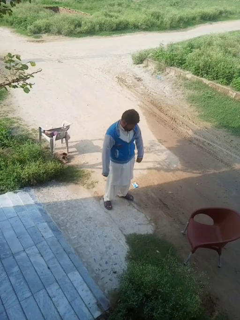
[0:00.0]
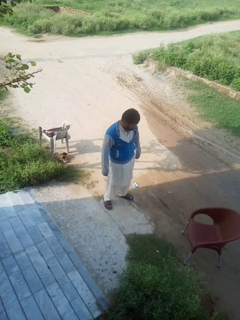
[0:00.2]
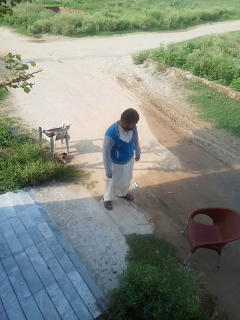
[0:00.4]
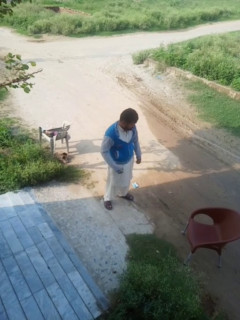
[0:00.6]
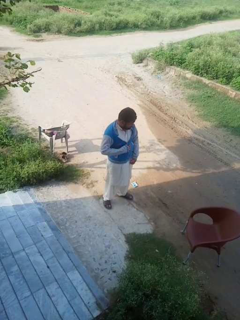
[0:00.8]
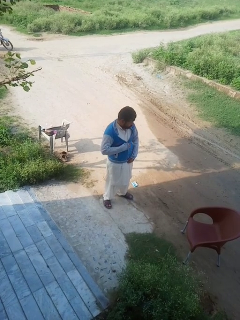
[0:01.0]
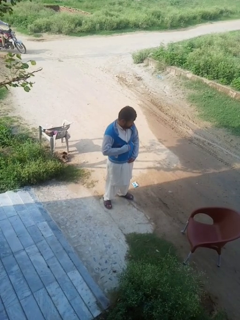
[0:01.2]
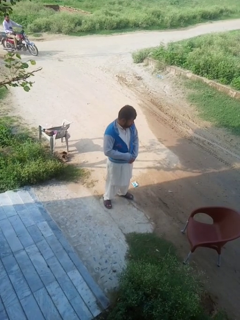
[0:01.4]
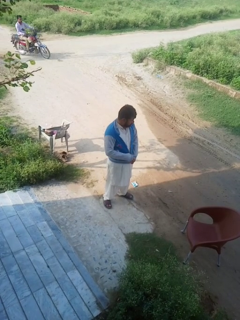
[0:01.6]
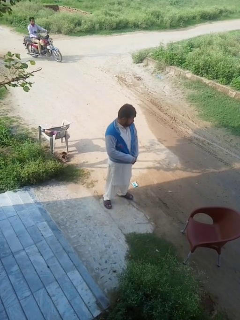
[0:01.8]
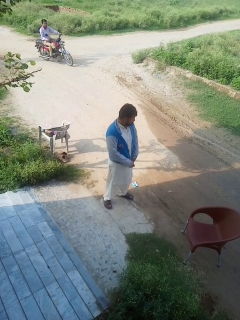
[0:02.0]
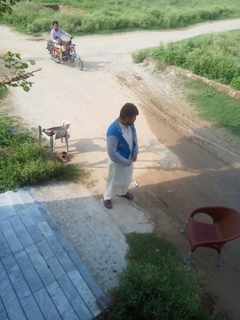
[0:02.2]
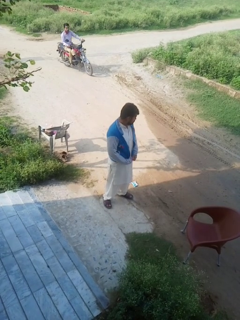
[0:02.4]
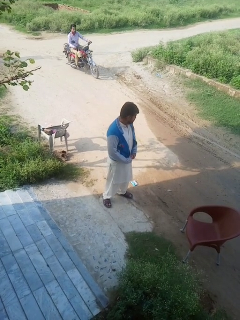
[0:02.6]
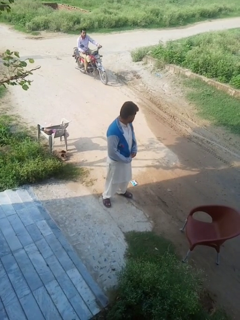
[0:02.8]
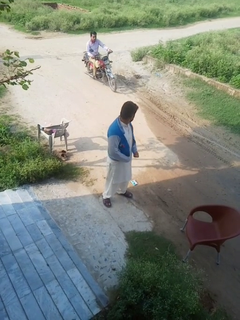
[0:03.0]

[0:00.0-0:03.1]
person unzips jacket

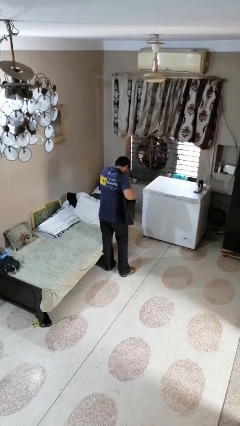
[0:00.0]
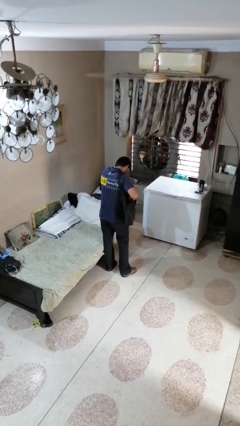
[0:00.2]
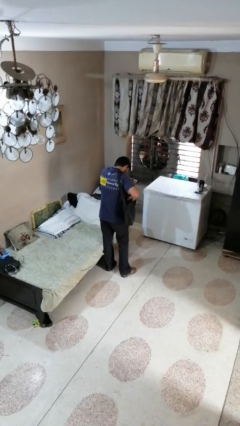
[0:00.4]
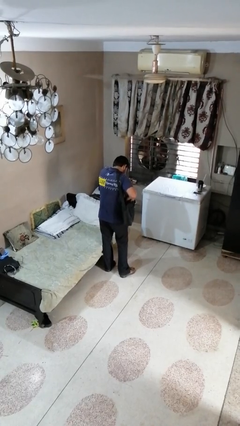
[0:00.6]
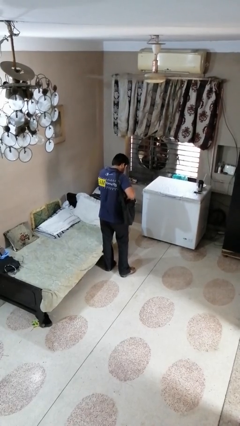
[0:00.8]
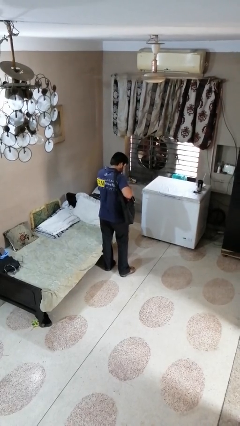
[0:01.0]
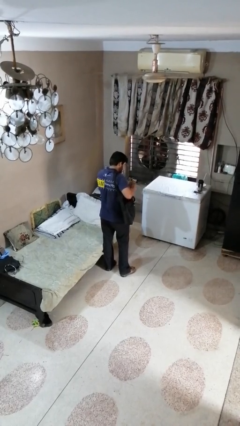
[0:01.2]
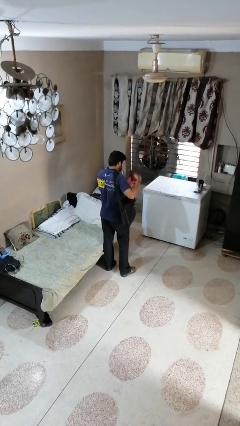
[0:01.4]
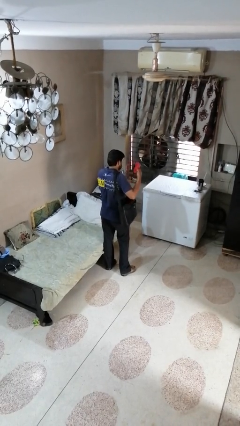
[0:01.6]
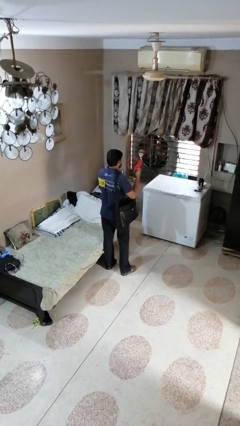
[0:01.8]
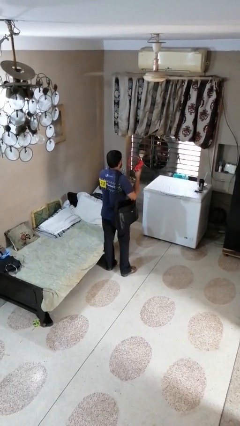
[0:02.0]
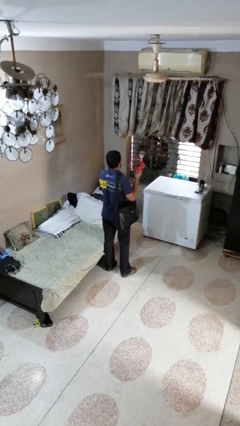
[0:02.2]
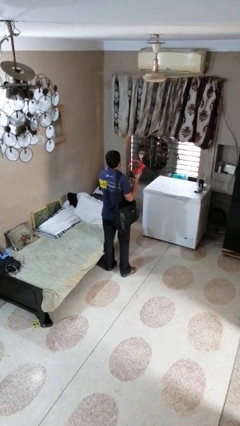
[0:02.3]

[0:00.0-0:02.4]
person takes object from backpack

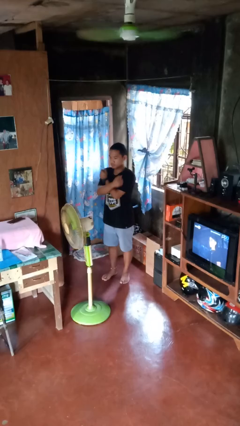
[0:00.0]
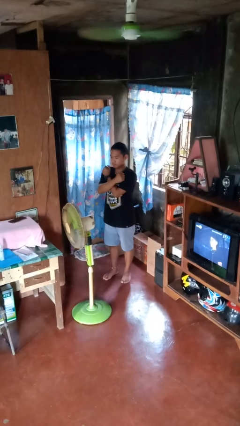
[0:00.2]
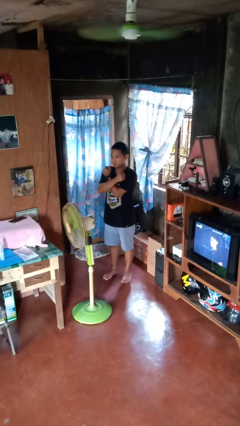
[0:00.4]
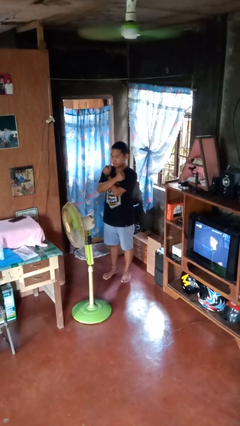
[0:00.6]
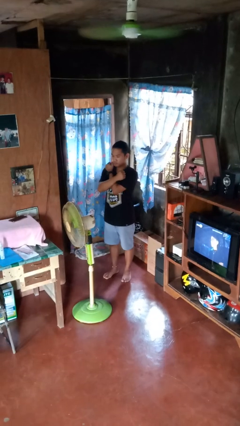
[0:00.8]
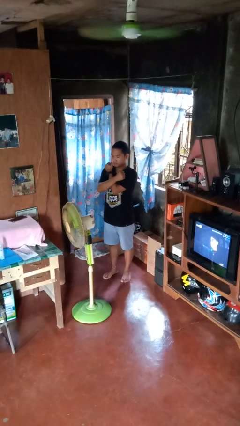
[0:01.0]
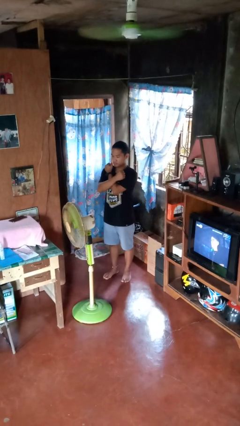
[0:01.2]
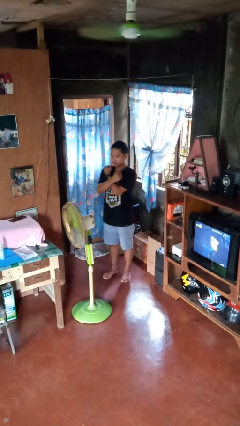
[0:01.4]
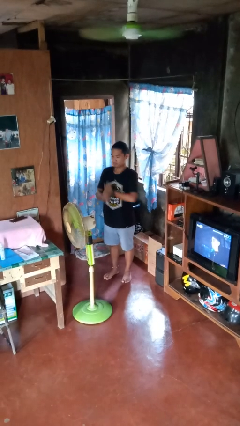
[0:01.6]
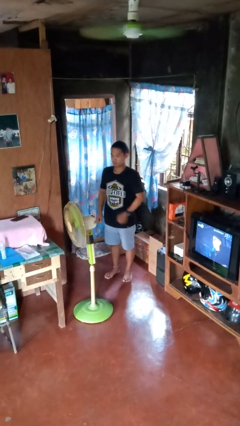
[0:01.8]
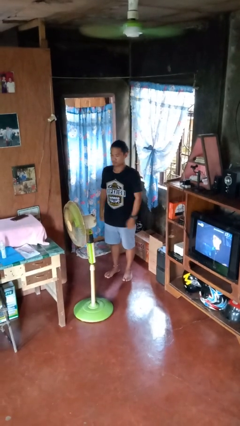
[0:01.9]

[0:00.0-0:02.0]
person gestures arms x

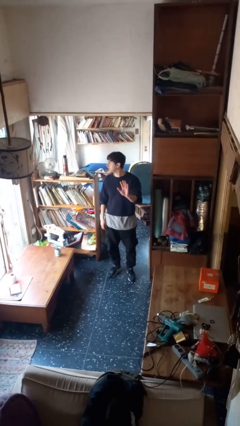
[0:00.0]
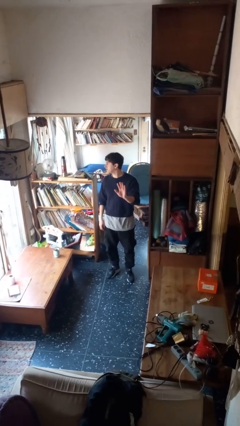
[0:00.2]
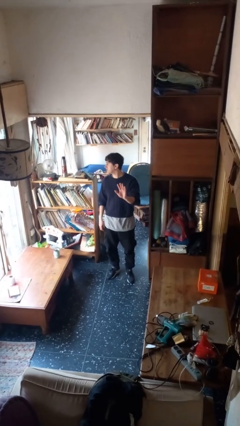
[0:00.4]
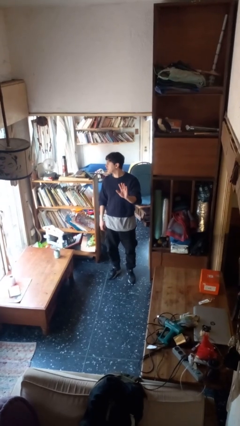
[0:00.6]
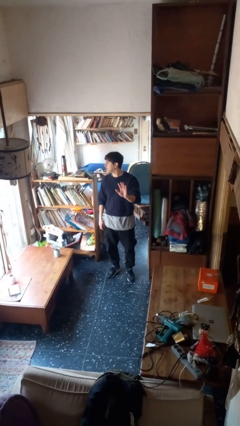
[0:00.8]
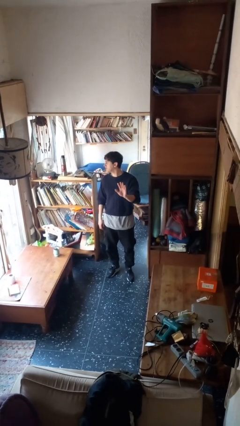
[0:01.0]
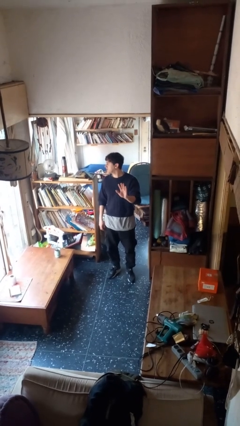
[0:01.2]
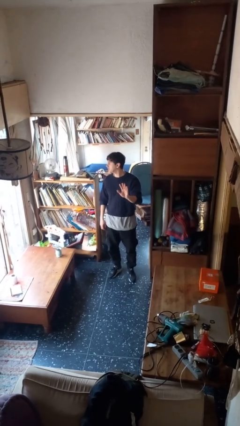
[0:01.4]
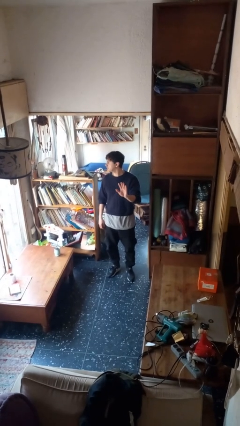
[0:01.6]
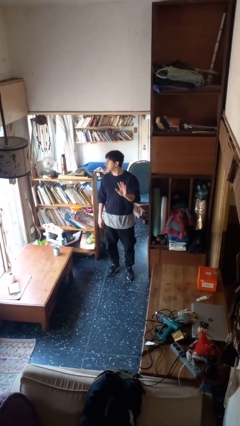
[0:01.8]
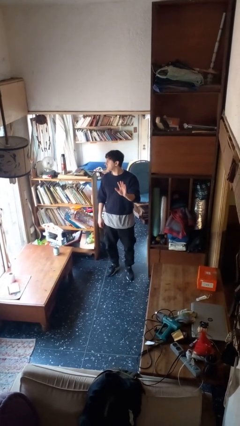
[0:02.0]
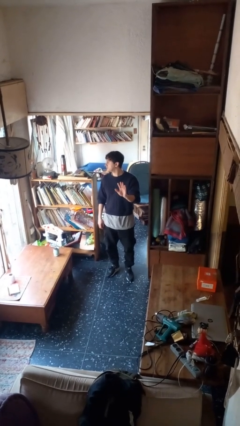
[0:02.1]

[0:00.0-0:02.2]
person gestures number five

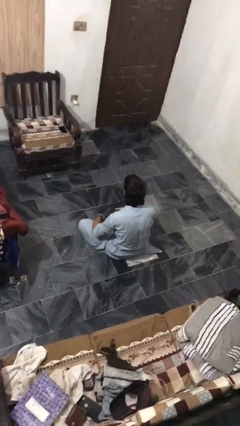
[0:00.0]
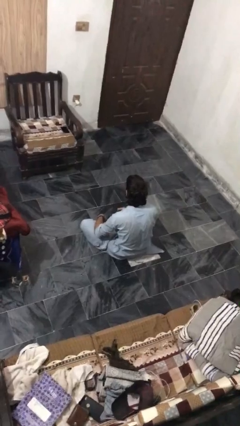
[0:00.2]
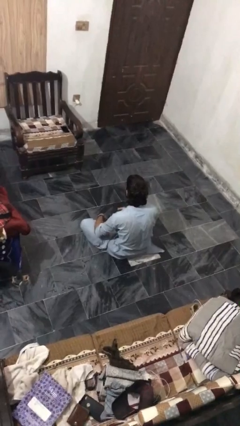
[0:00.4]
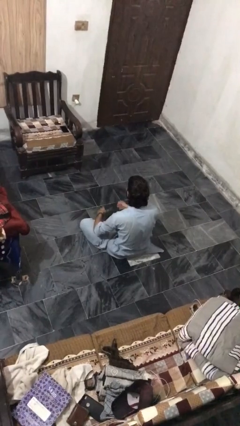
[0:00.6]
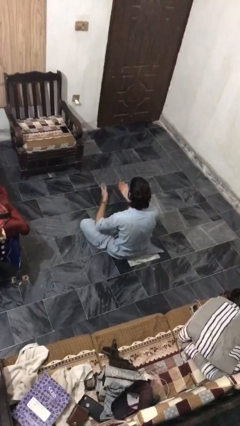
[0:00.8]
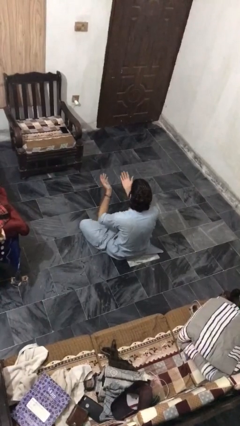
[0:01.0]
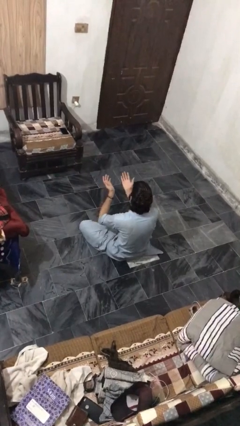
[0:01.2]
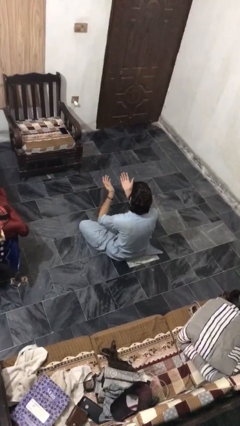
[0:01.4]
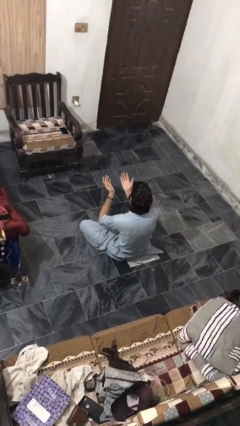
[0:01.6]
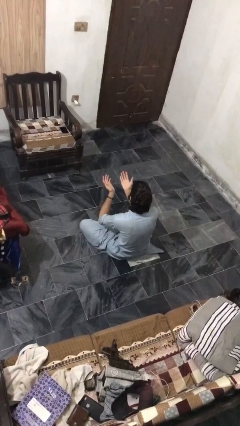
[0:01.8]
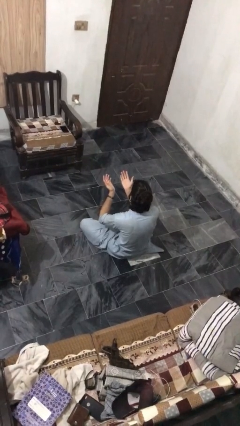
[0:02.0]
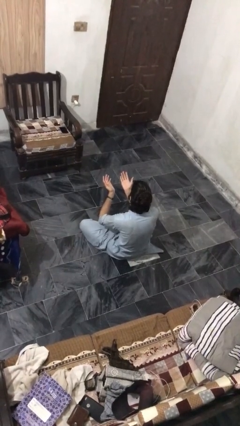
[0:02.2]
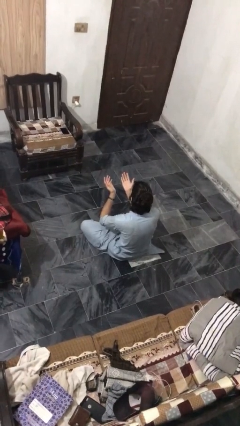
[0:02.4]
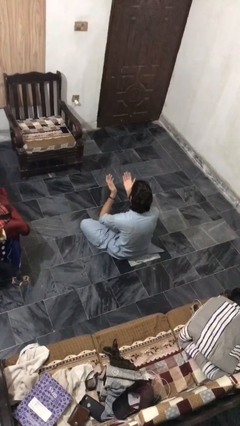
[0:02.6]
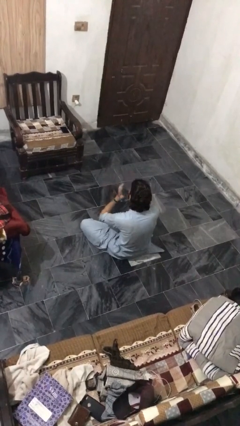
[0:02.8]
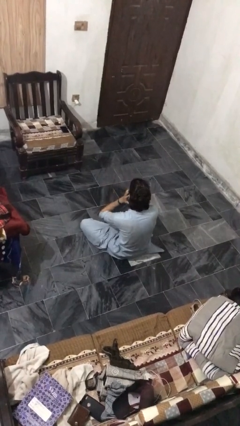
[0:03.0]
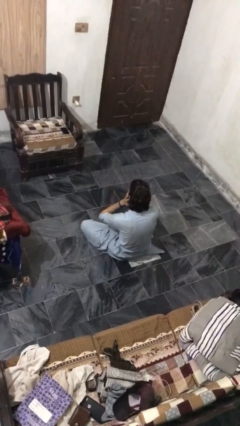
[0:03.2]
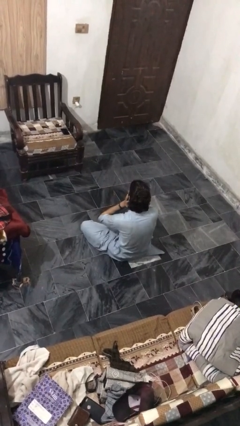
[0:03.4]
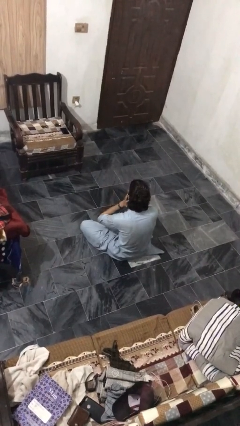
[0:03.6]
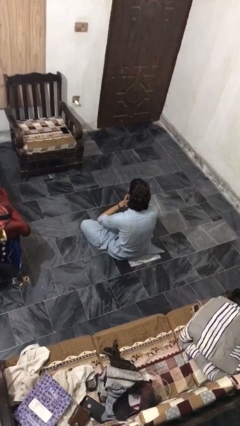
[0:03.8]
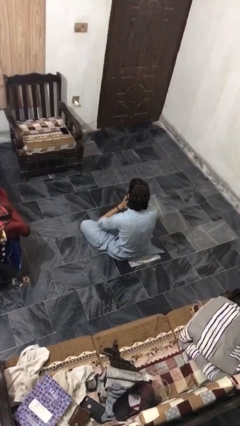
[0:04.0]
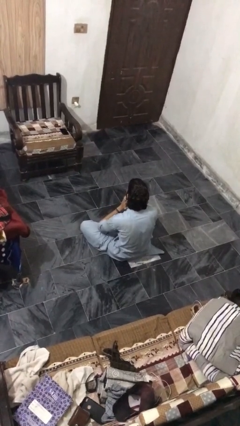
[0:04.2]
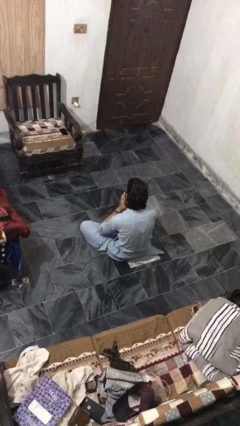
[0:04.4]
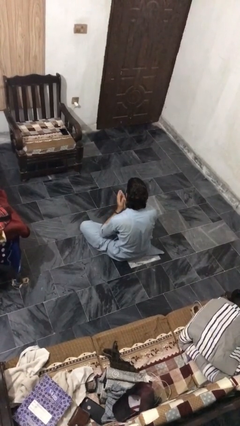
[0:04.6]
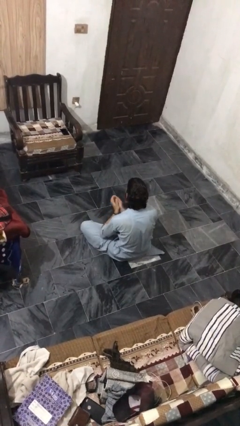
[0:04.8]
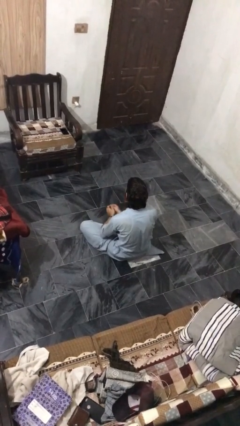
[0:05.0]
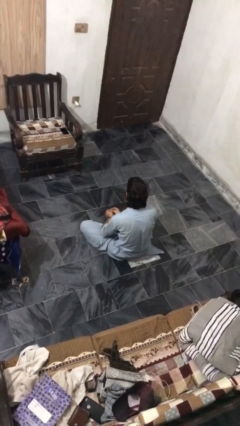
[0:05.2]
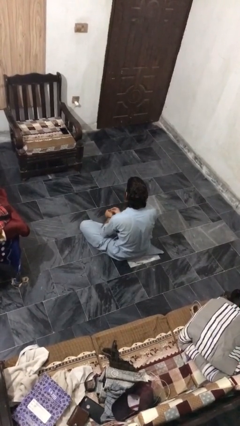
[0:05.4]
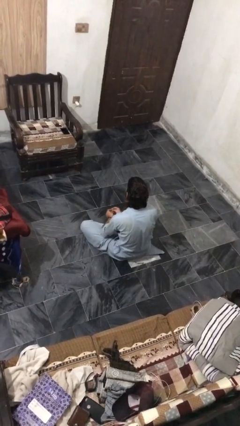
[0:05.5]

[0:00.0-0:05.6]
person prays

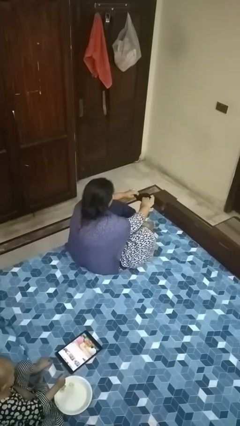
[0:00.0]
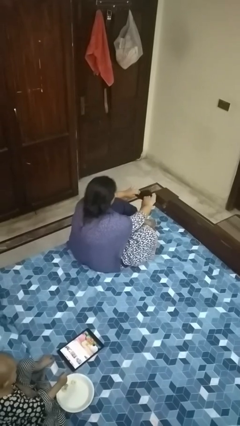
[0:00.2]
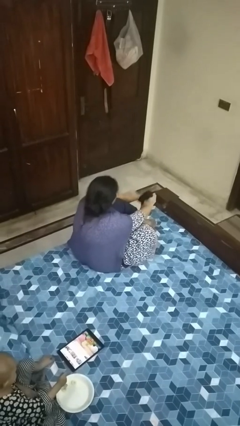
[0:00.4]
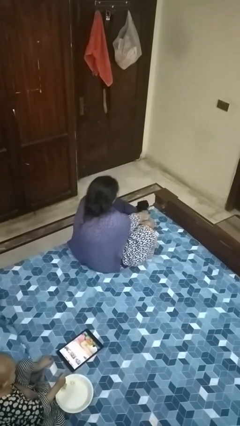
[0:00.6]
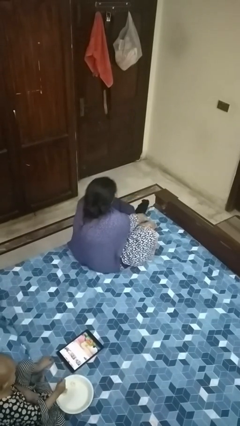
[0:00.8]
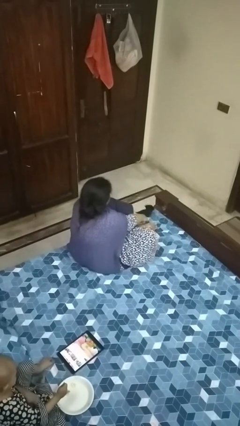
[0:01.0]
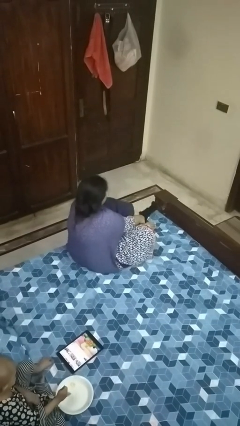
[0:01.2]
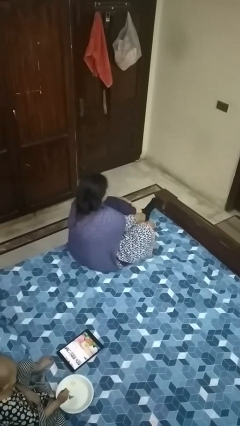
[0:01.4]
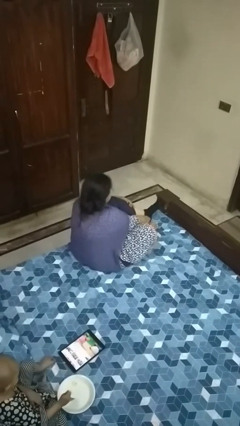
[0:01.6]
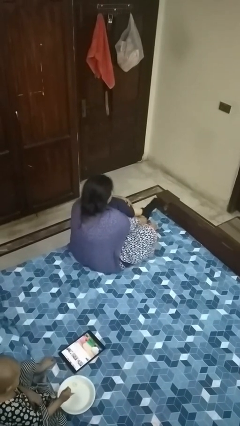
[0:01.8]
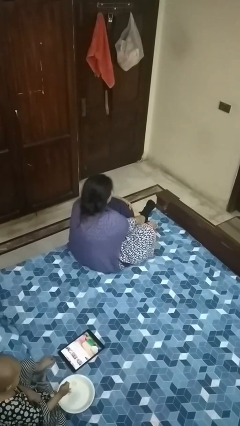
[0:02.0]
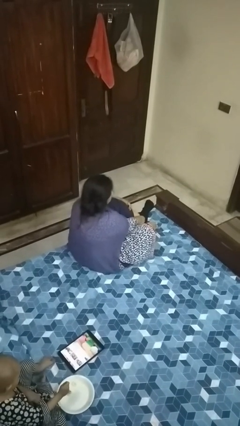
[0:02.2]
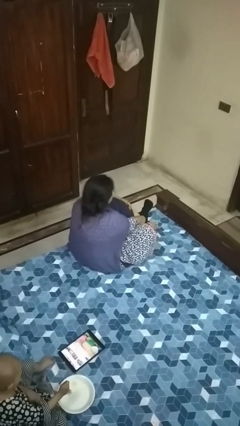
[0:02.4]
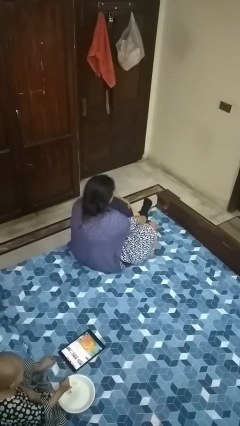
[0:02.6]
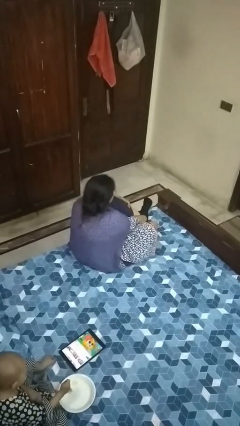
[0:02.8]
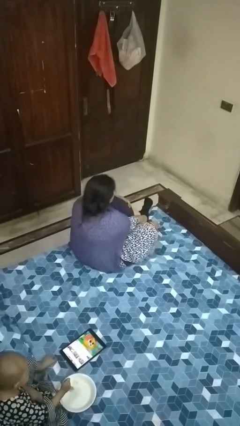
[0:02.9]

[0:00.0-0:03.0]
person puts on socks
